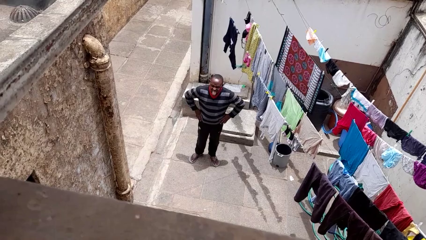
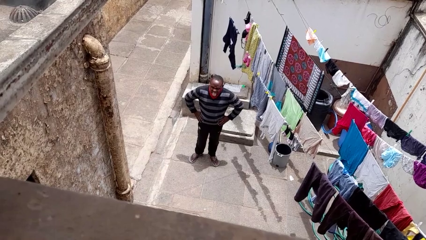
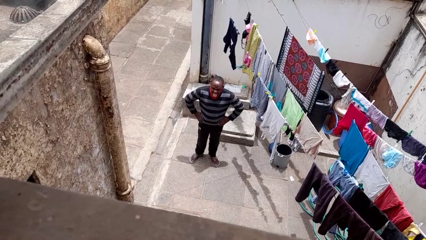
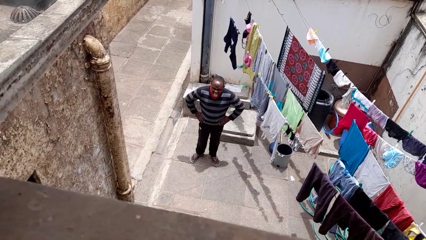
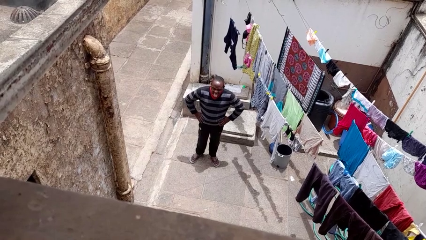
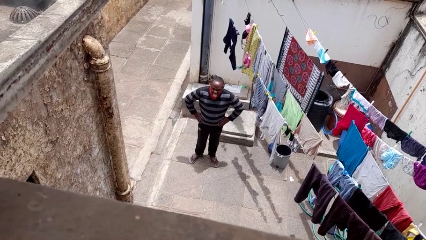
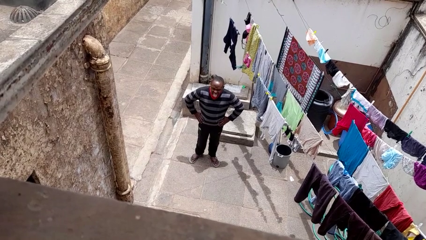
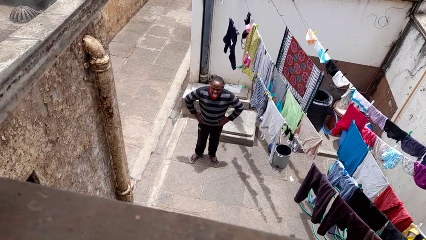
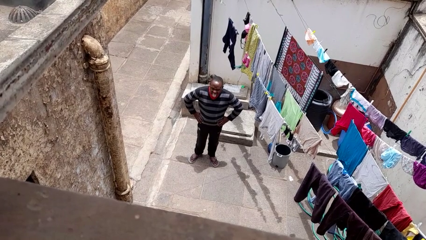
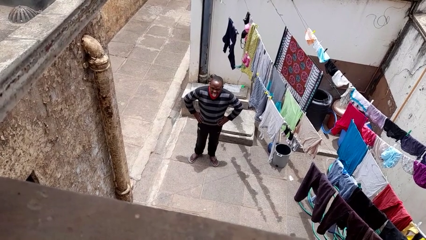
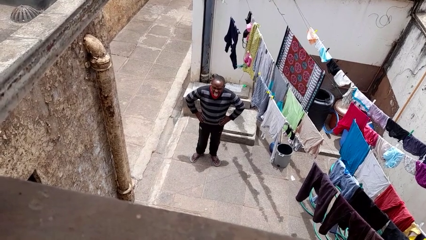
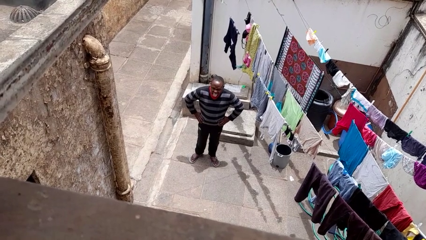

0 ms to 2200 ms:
person sticks out tongue

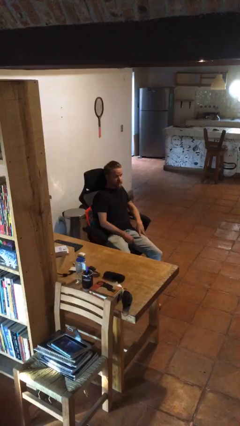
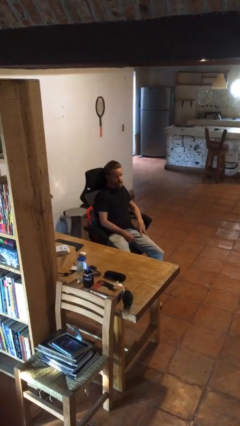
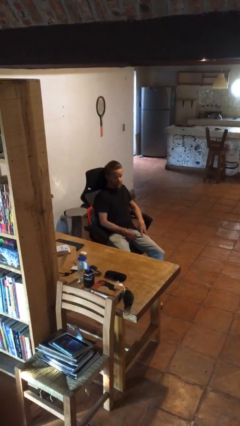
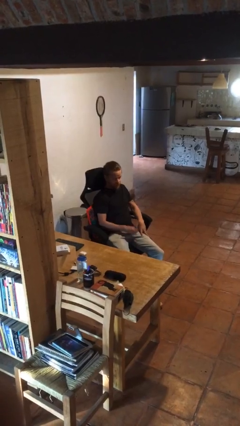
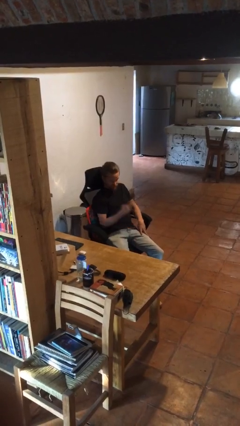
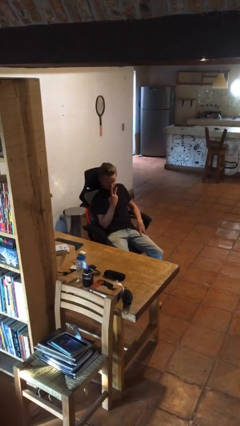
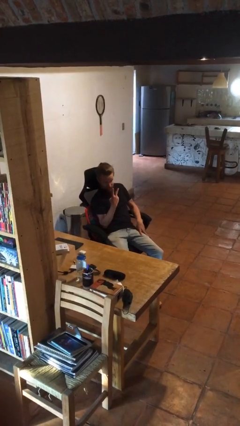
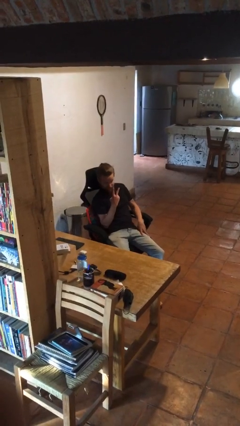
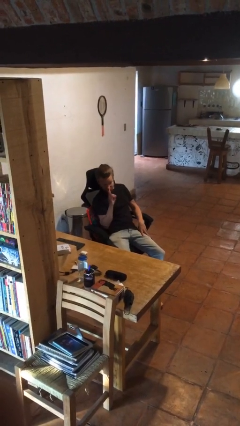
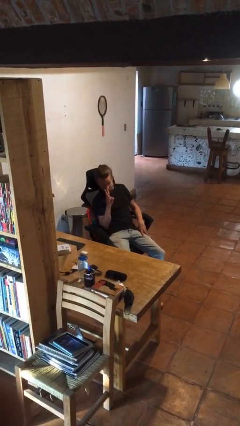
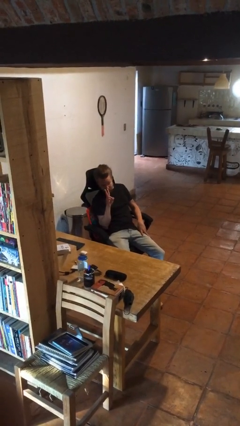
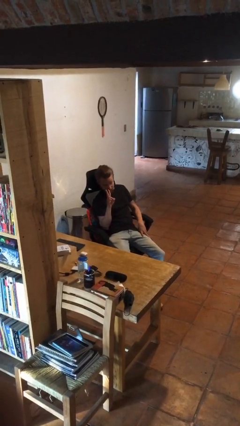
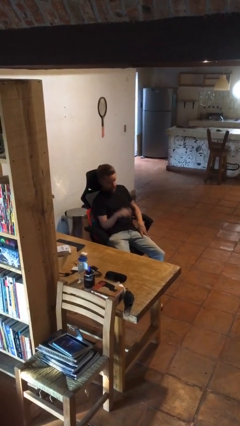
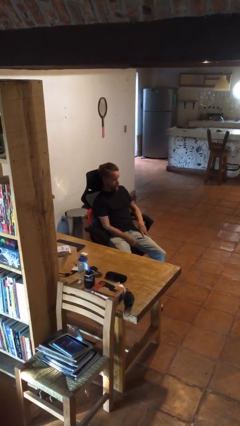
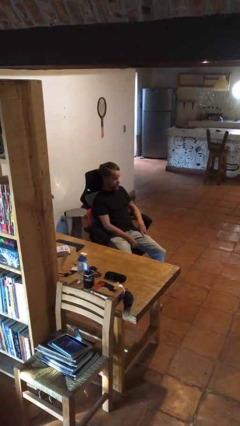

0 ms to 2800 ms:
person gestures peace

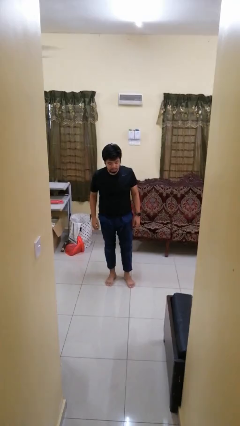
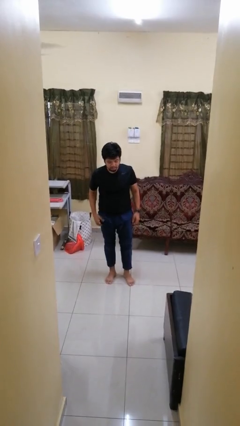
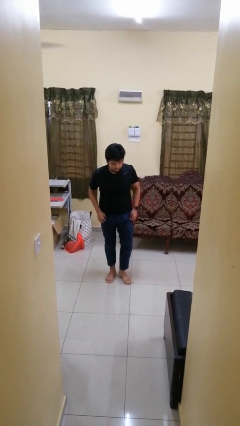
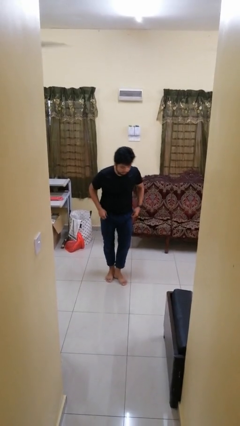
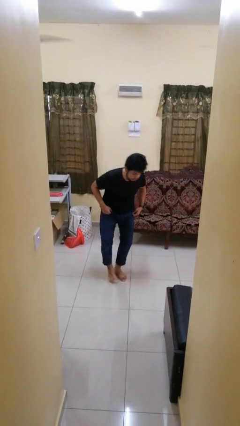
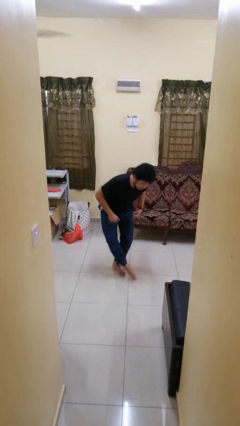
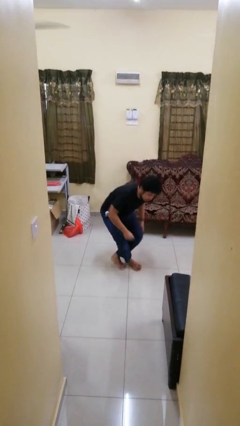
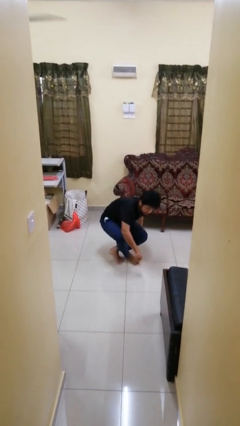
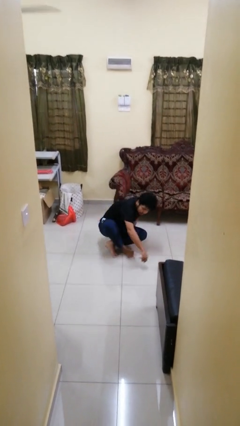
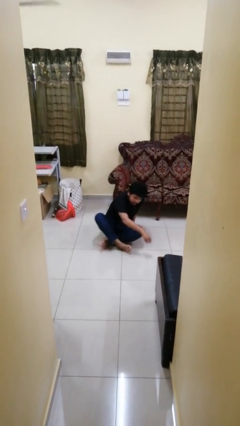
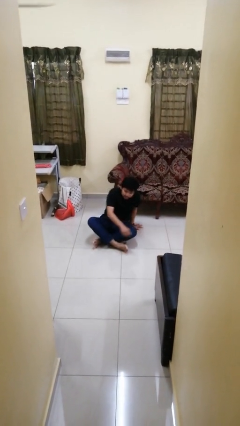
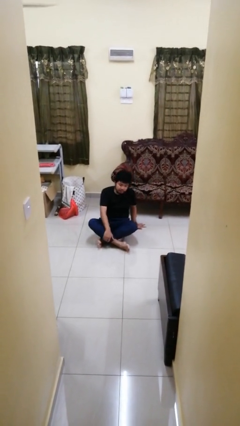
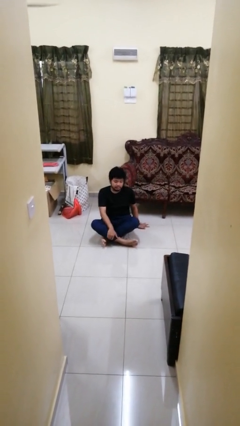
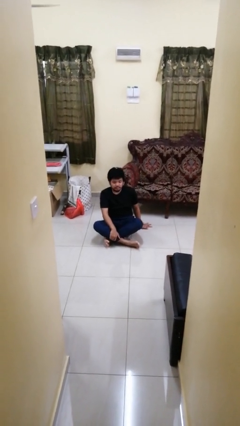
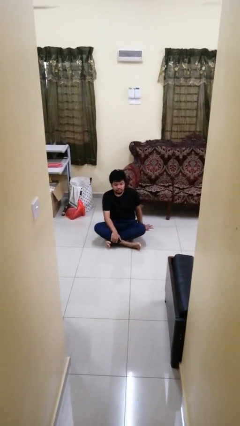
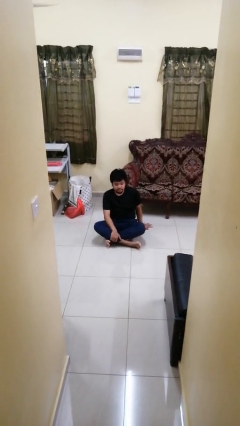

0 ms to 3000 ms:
person sits crisscross

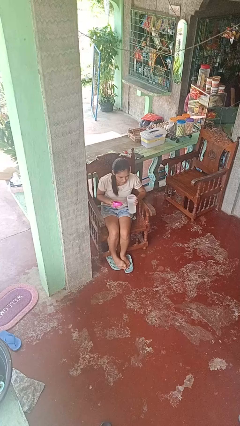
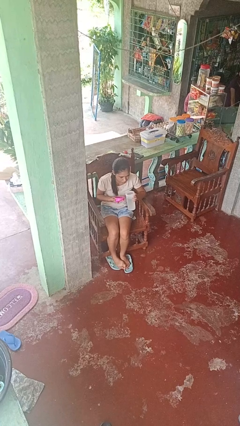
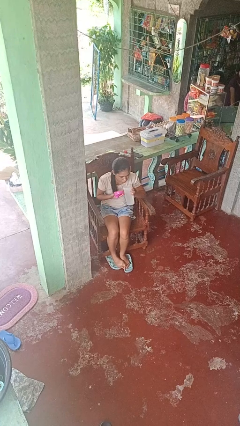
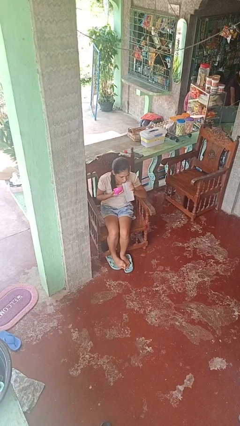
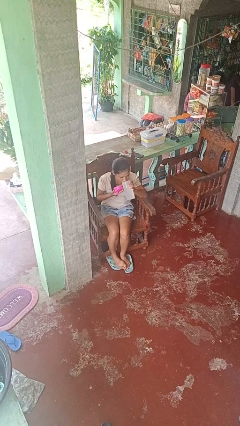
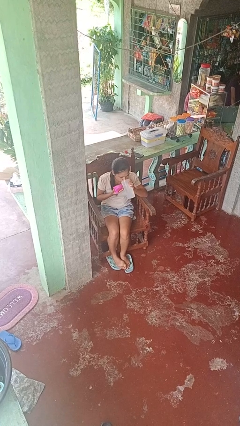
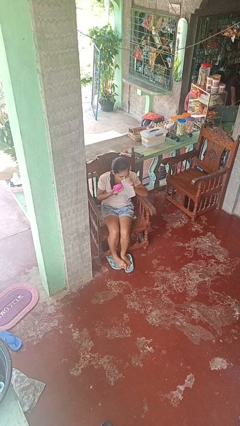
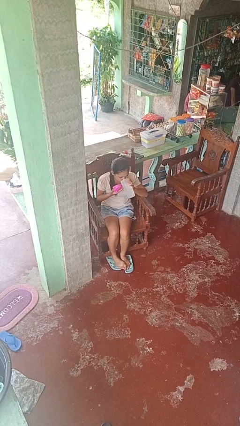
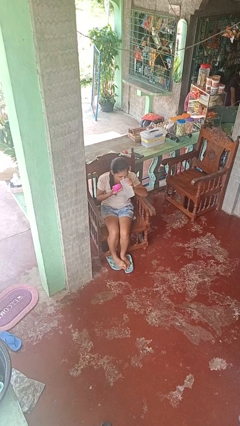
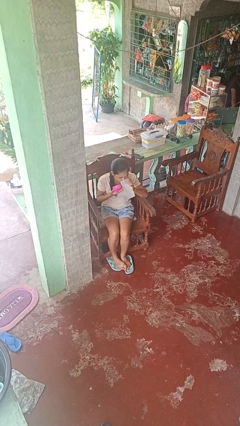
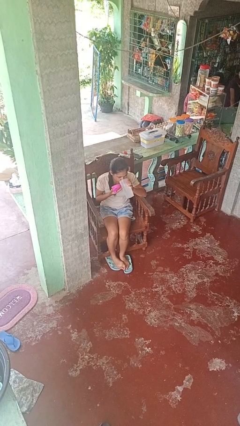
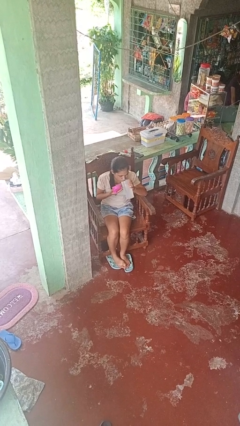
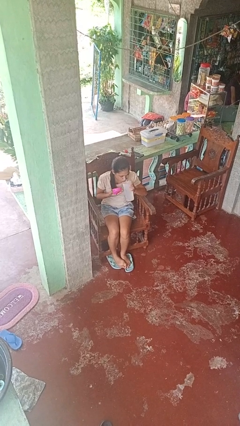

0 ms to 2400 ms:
person drinks from bottle

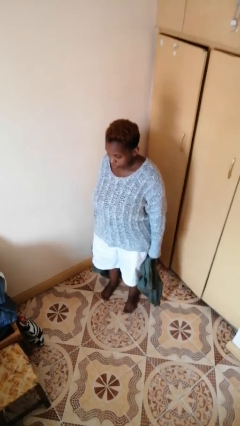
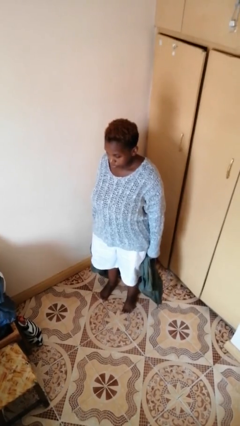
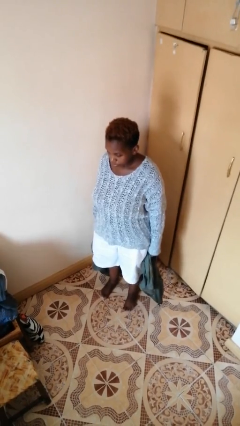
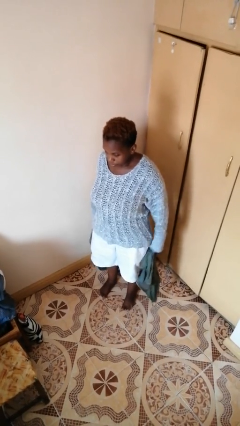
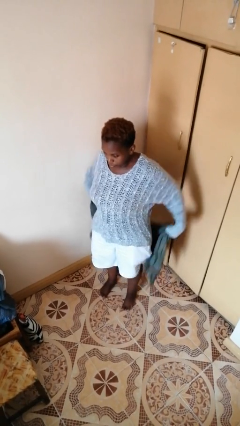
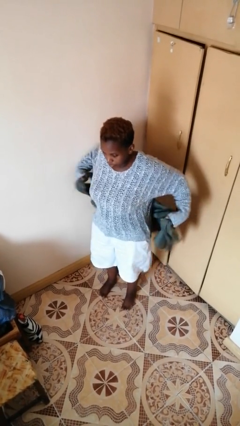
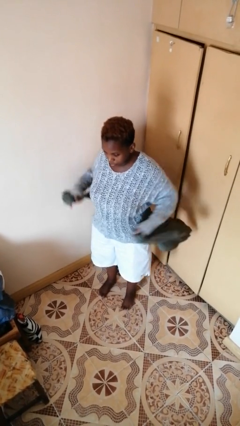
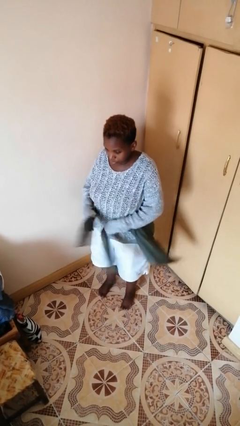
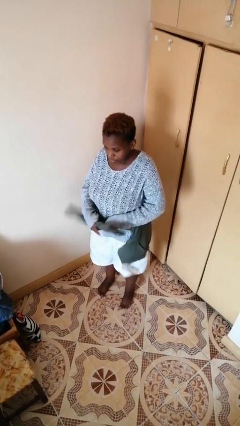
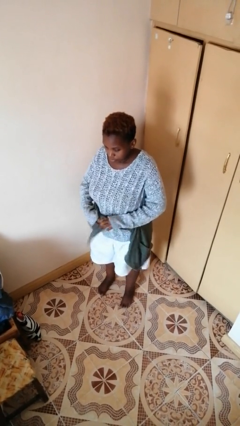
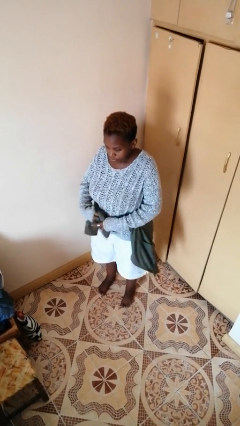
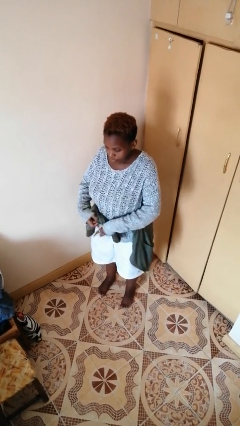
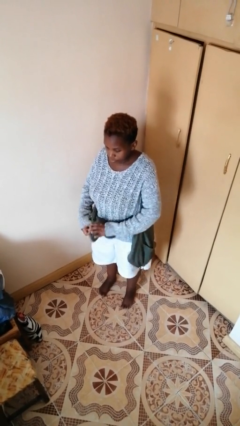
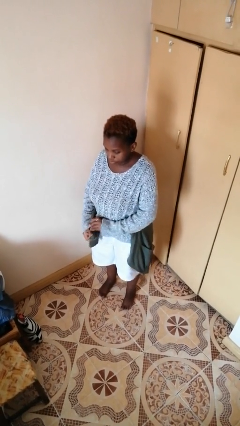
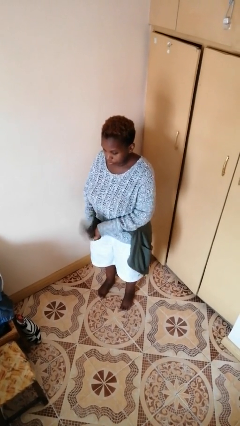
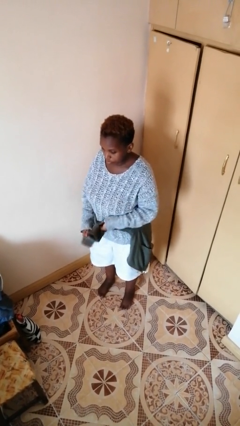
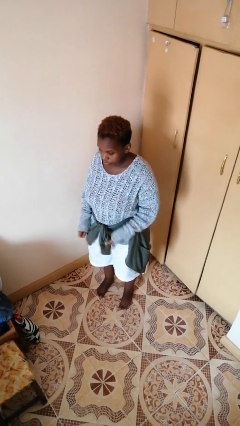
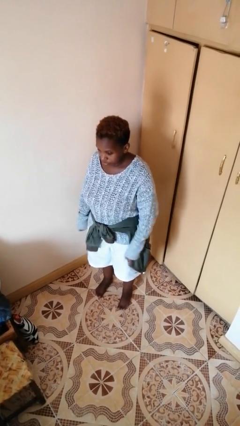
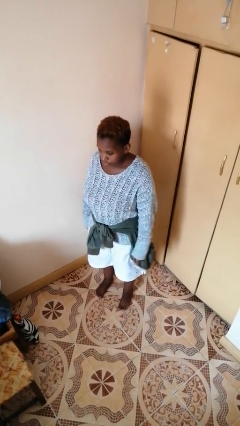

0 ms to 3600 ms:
person ties jacket around waist

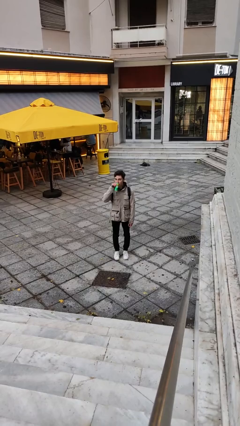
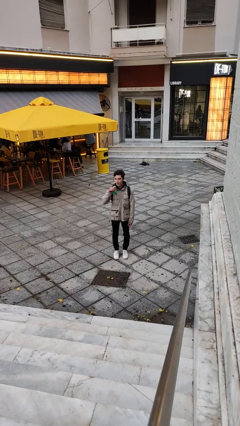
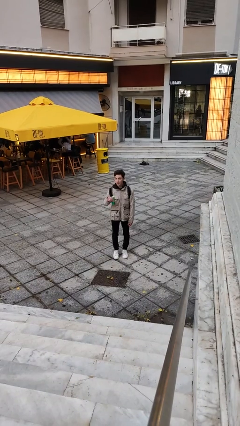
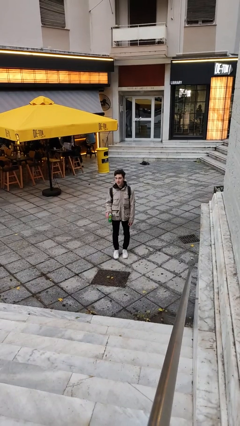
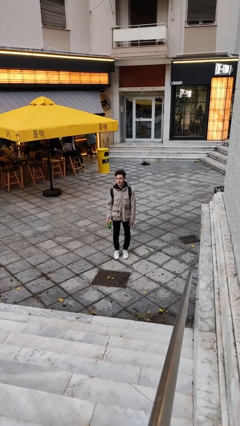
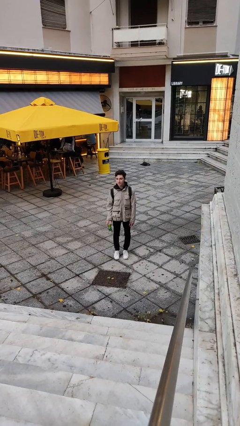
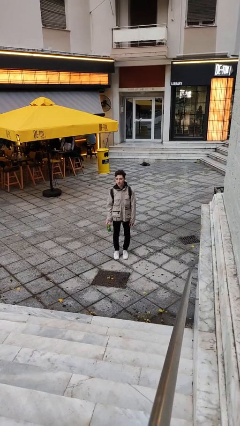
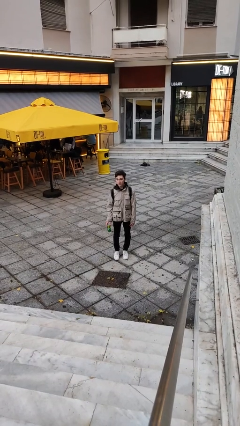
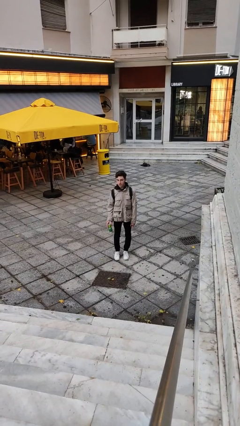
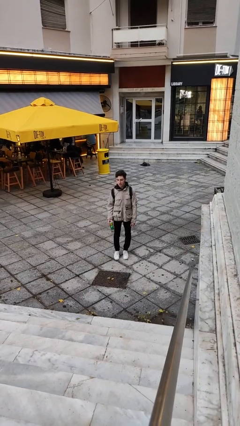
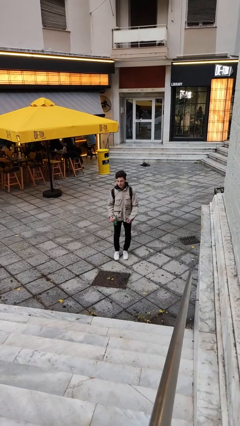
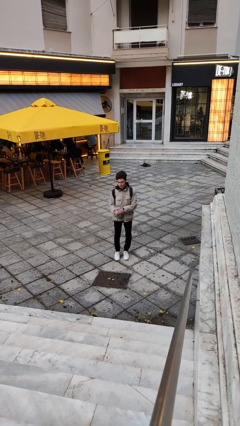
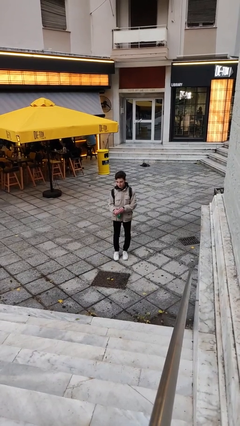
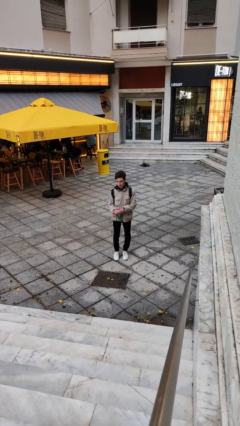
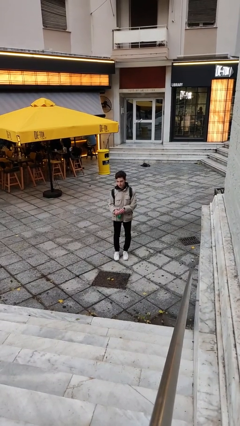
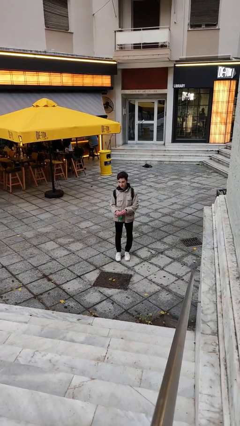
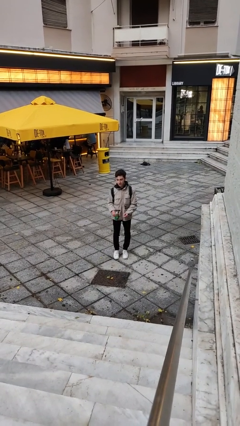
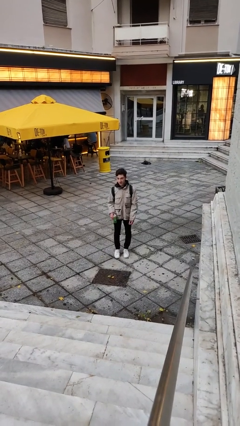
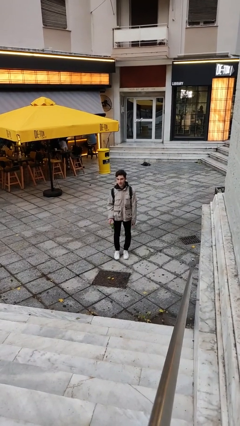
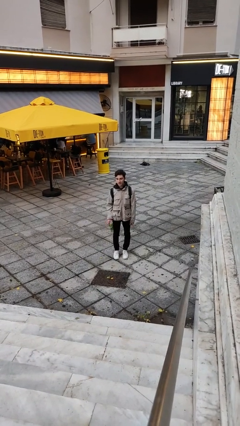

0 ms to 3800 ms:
person drinks from beverage can
